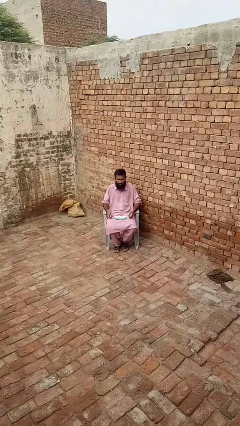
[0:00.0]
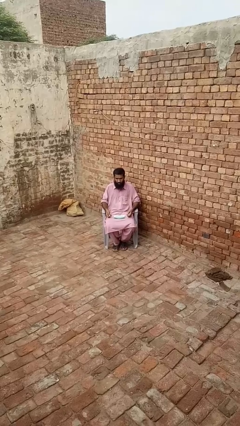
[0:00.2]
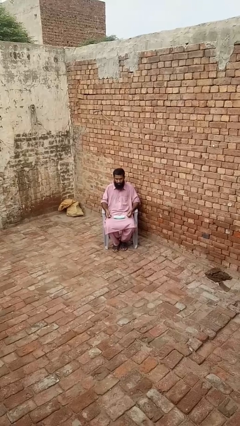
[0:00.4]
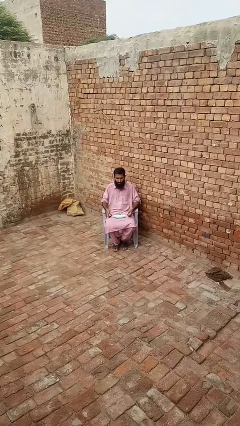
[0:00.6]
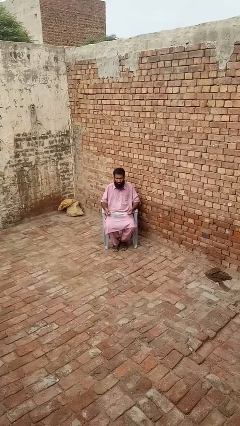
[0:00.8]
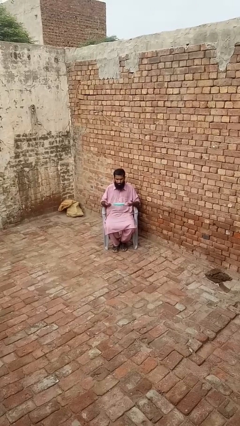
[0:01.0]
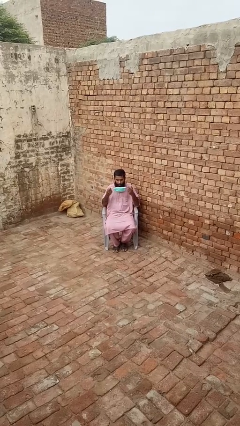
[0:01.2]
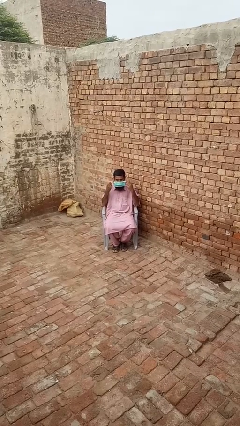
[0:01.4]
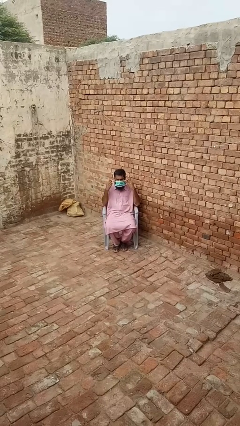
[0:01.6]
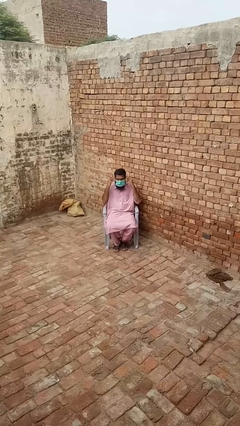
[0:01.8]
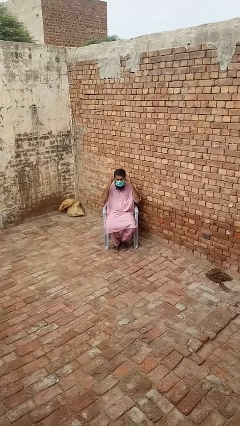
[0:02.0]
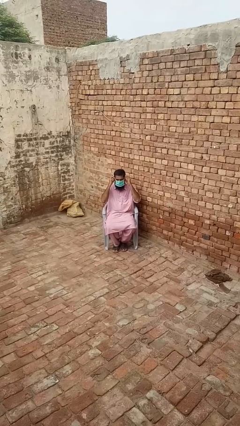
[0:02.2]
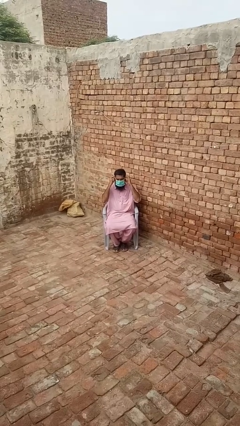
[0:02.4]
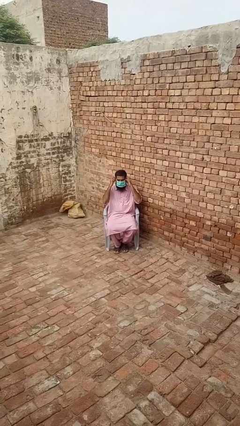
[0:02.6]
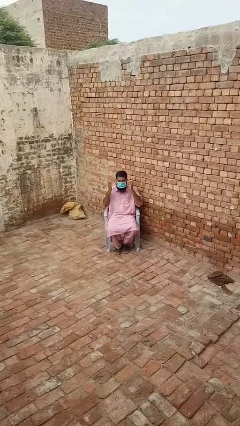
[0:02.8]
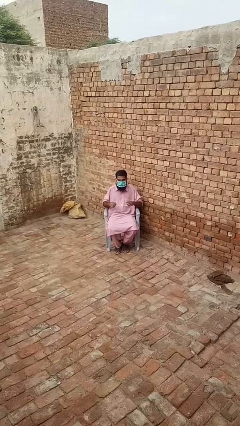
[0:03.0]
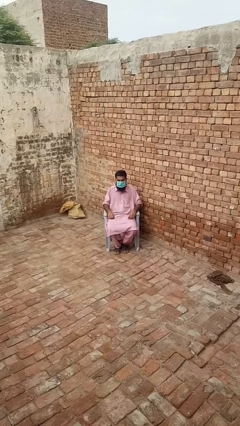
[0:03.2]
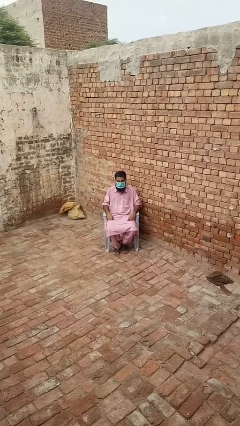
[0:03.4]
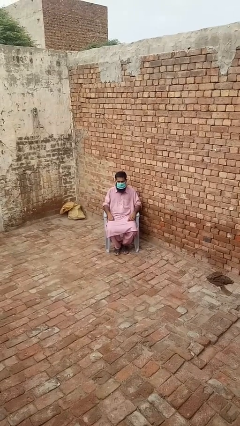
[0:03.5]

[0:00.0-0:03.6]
person puts on facemask

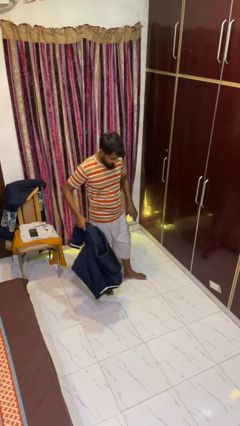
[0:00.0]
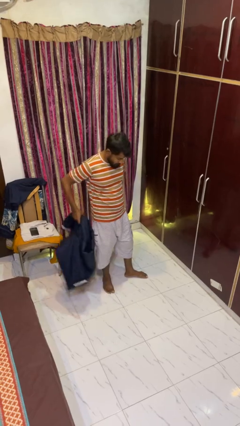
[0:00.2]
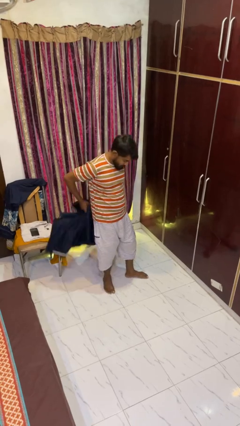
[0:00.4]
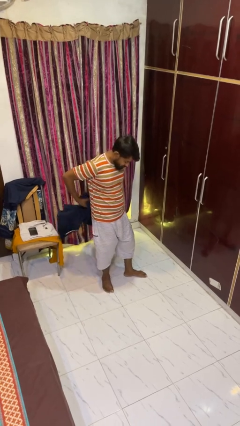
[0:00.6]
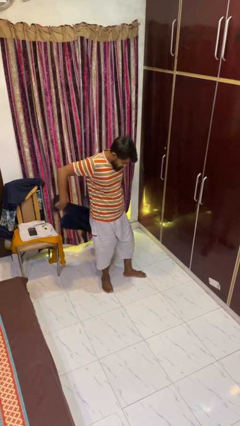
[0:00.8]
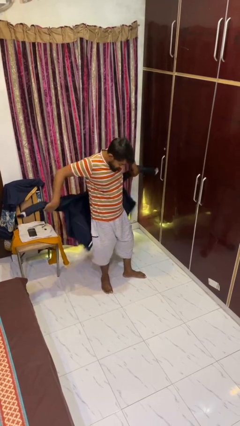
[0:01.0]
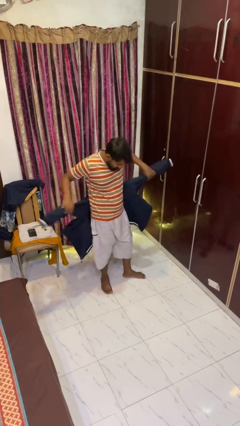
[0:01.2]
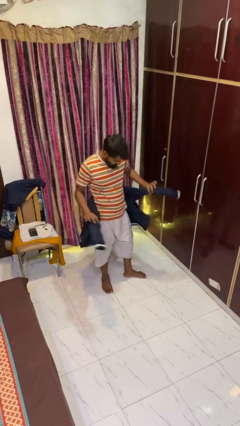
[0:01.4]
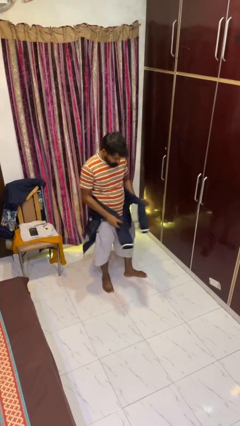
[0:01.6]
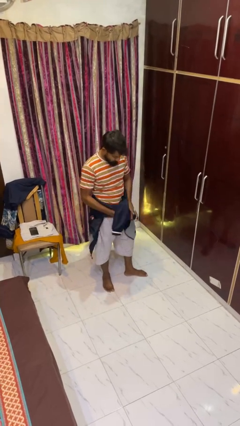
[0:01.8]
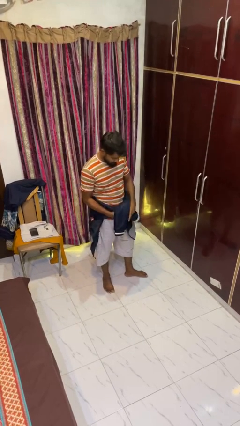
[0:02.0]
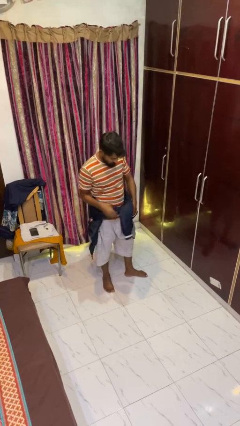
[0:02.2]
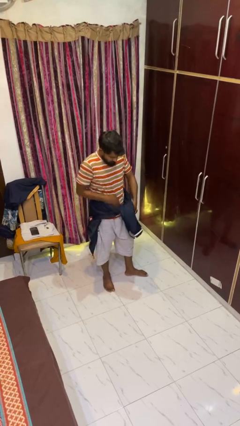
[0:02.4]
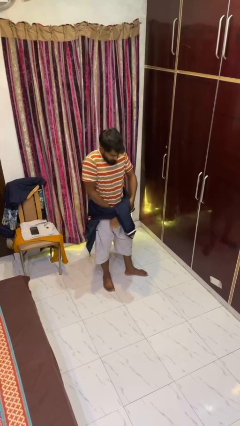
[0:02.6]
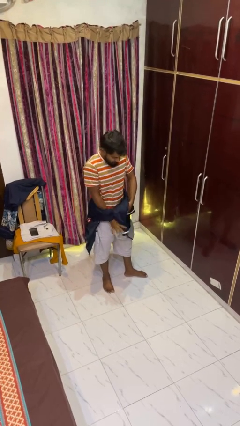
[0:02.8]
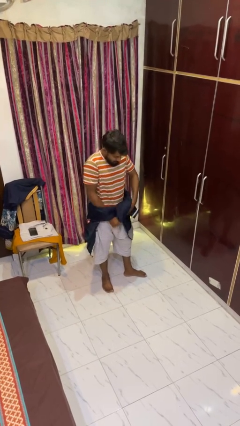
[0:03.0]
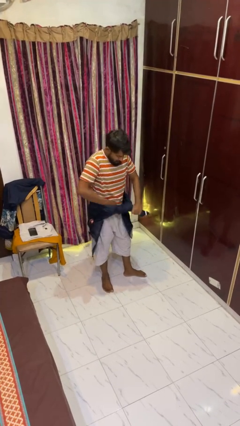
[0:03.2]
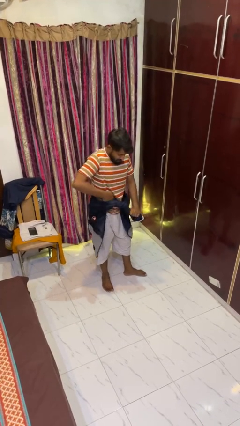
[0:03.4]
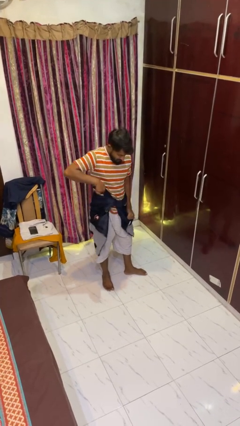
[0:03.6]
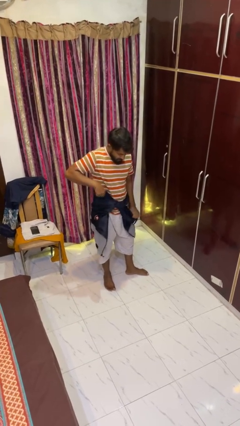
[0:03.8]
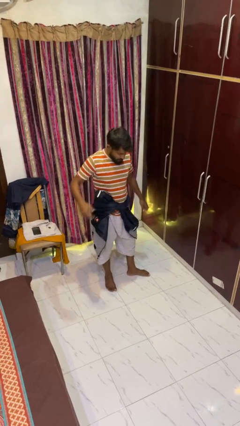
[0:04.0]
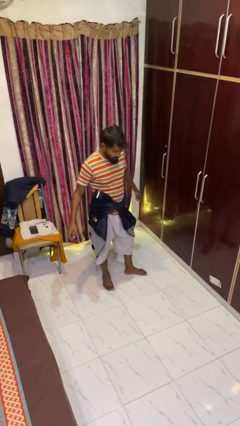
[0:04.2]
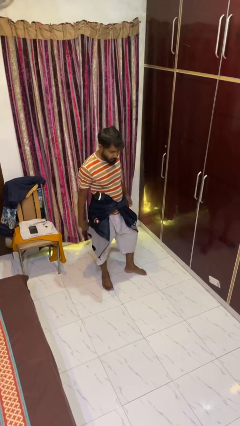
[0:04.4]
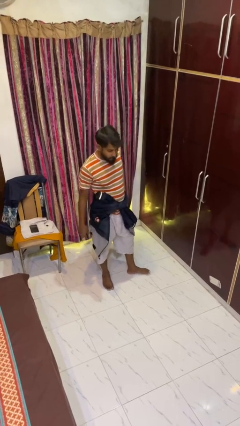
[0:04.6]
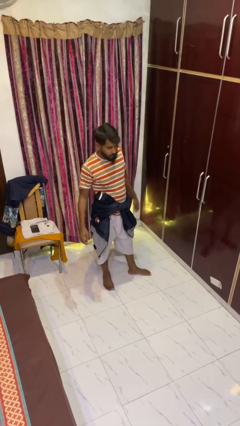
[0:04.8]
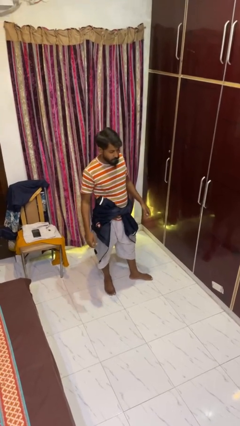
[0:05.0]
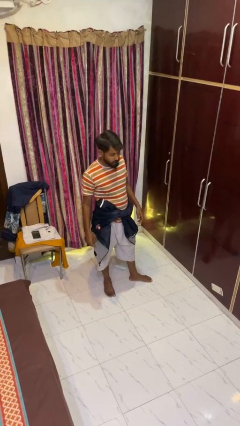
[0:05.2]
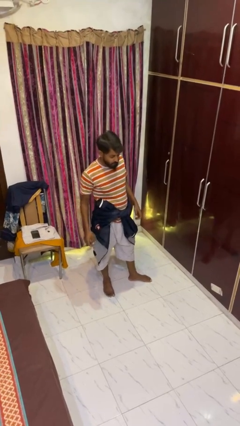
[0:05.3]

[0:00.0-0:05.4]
person ties jacket around waist

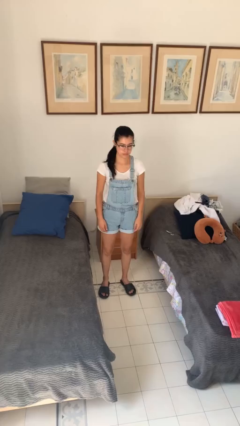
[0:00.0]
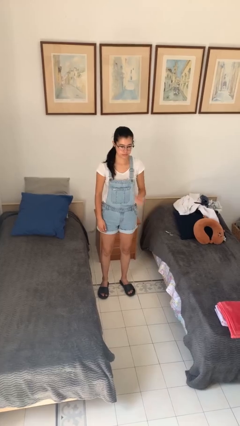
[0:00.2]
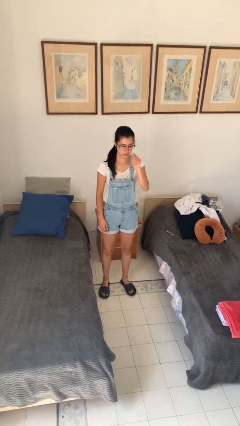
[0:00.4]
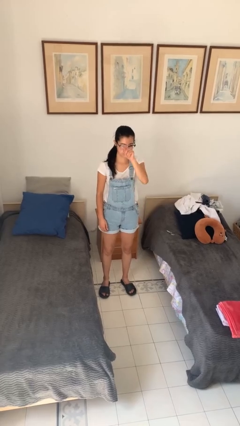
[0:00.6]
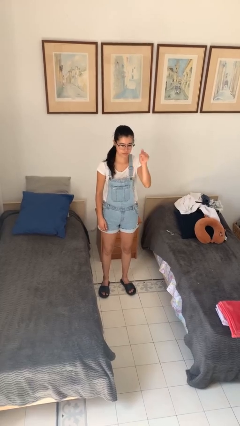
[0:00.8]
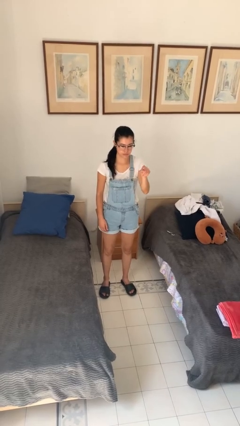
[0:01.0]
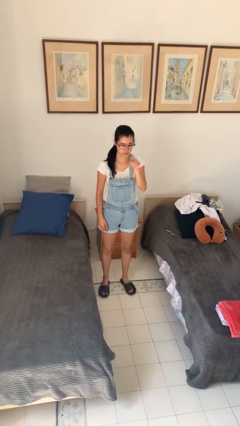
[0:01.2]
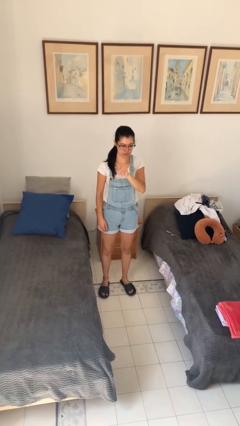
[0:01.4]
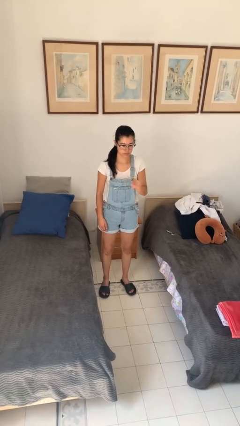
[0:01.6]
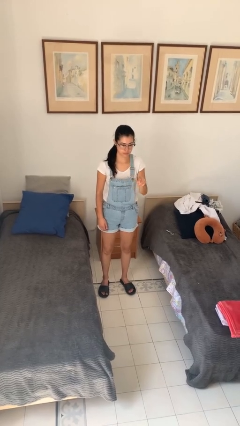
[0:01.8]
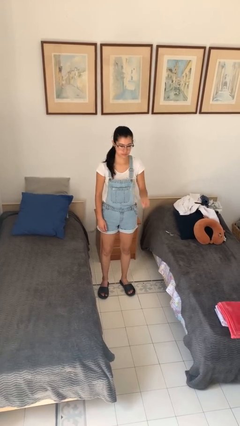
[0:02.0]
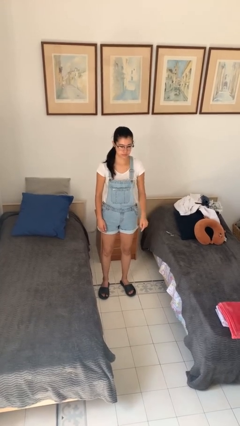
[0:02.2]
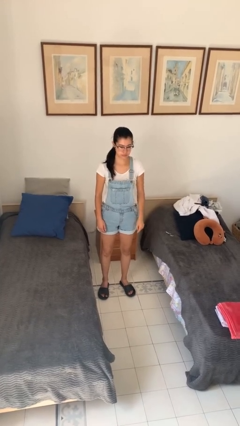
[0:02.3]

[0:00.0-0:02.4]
person gestures number five

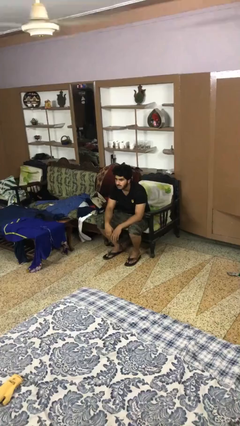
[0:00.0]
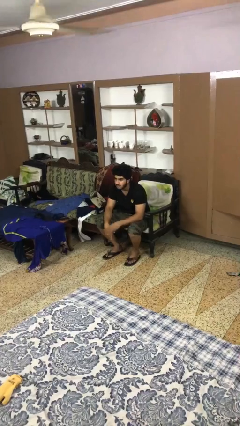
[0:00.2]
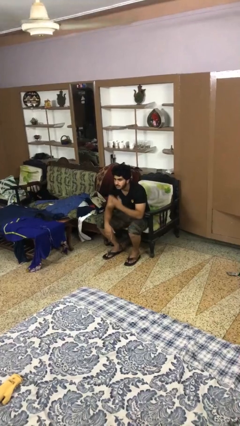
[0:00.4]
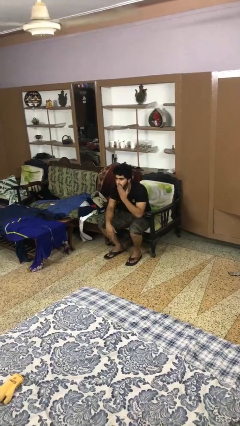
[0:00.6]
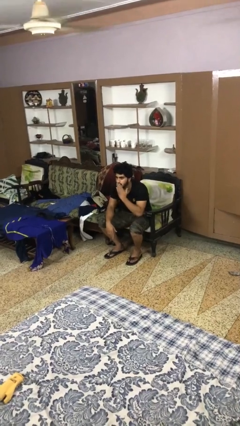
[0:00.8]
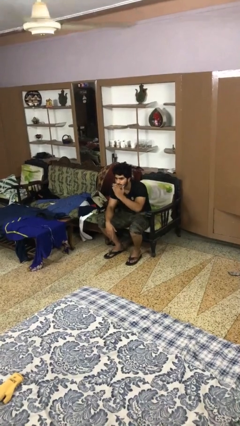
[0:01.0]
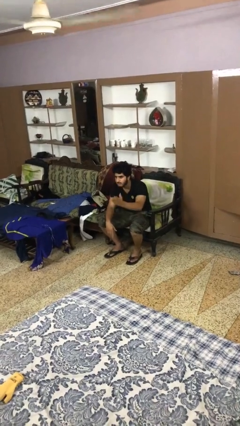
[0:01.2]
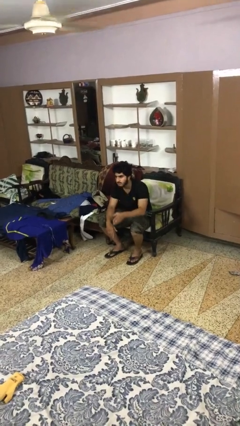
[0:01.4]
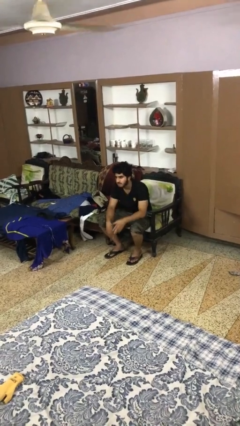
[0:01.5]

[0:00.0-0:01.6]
person gestures blow kiss

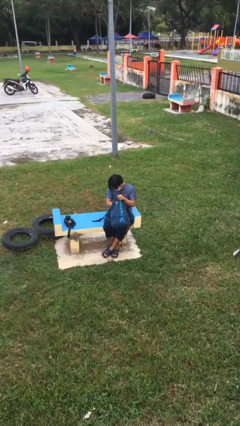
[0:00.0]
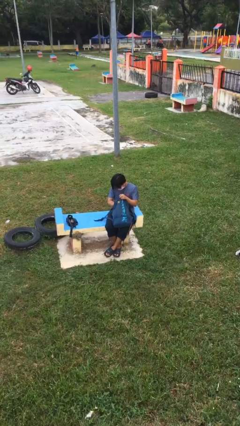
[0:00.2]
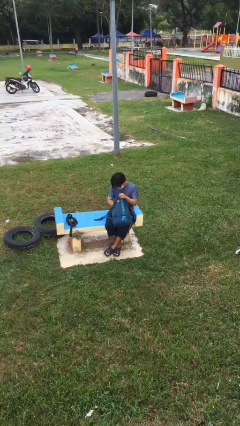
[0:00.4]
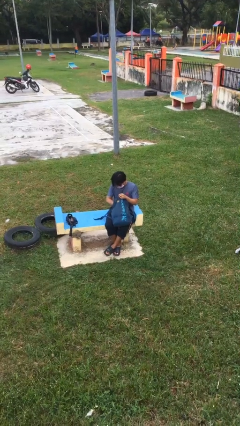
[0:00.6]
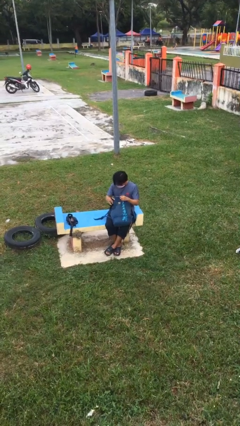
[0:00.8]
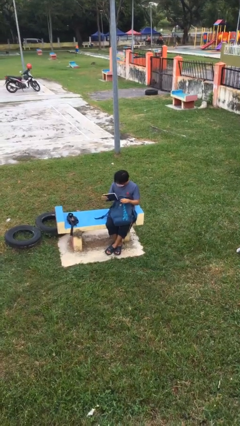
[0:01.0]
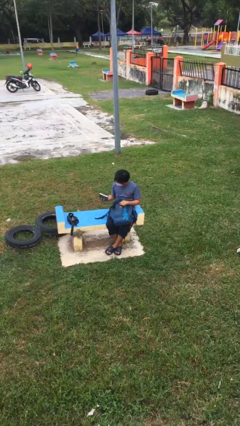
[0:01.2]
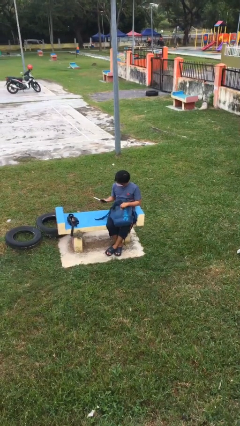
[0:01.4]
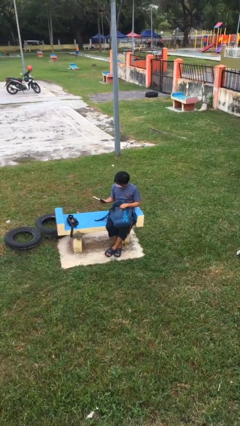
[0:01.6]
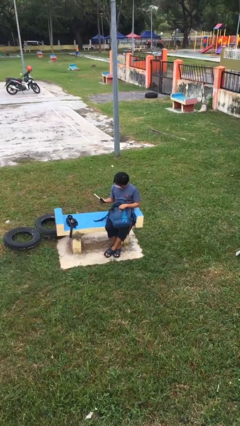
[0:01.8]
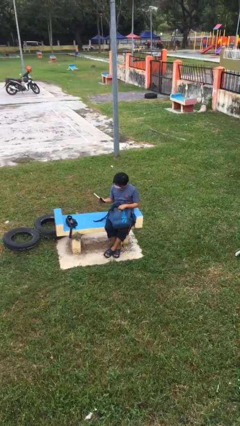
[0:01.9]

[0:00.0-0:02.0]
person takes object from backpack

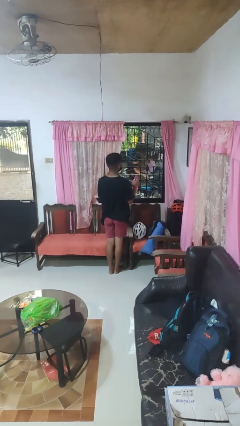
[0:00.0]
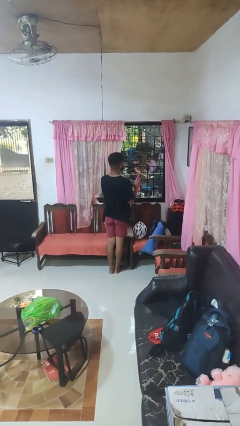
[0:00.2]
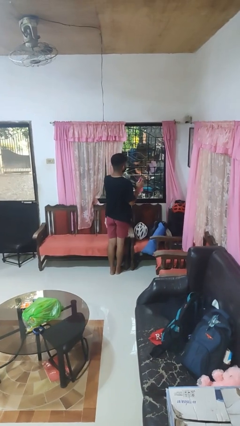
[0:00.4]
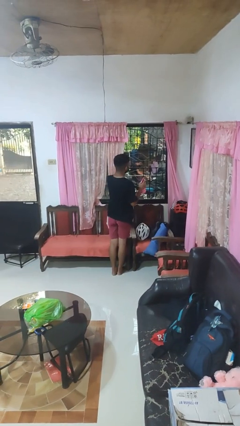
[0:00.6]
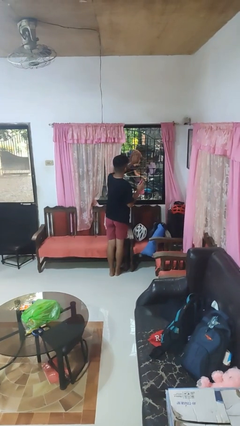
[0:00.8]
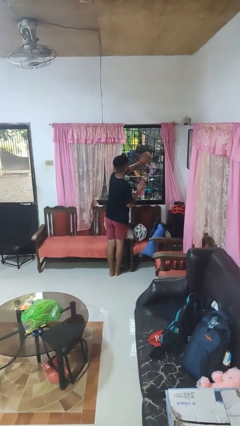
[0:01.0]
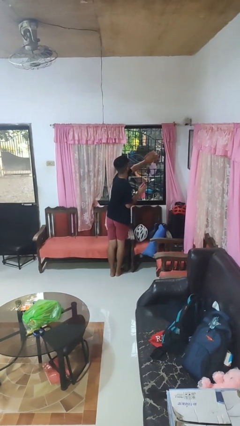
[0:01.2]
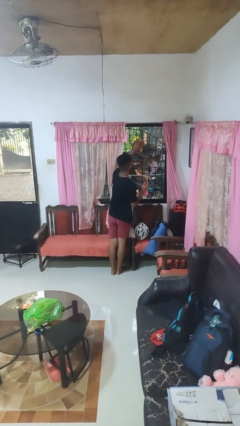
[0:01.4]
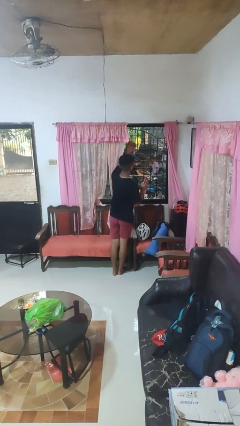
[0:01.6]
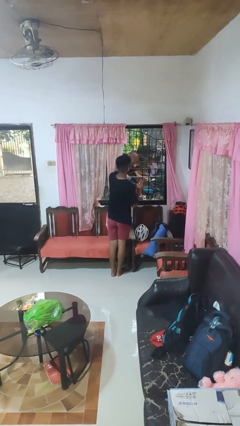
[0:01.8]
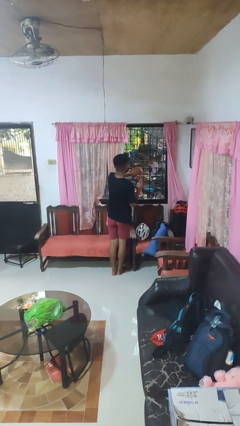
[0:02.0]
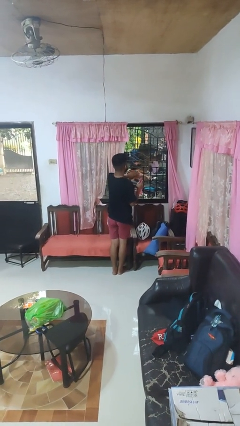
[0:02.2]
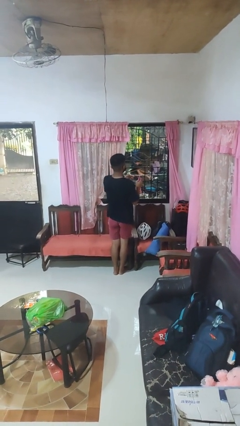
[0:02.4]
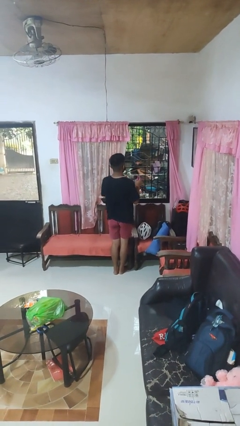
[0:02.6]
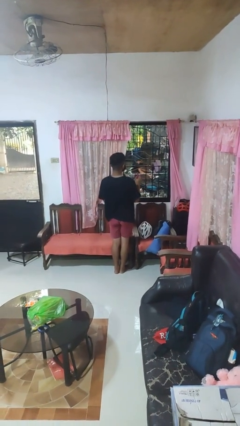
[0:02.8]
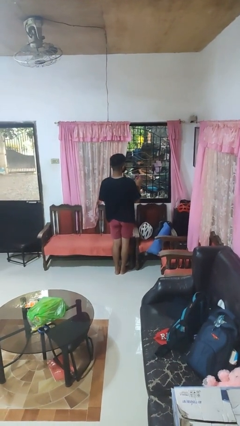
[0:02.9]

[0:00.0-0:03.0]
person washes window
